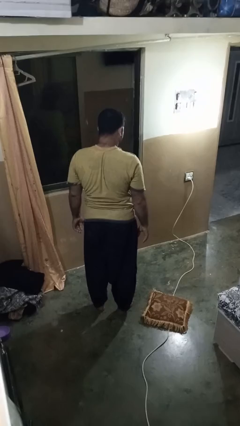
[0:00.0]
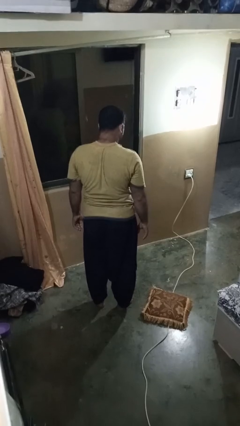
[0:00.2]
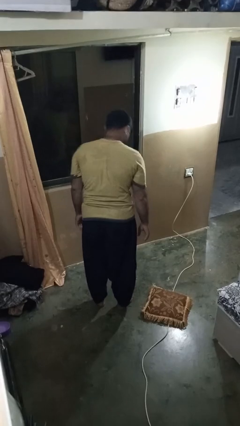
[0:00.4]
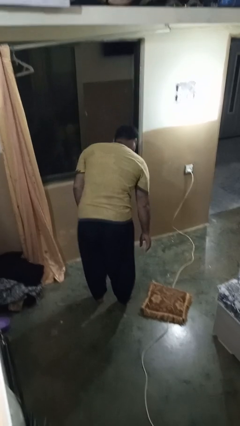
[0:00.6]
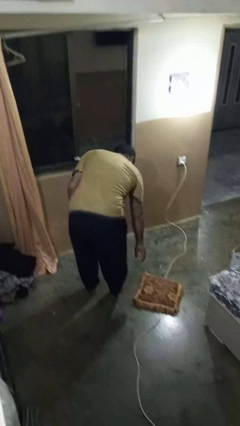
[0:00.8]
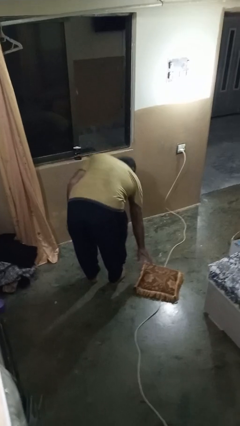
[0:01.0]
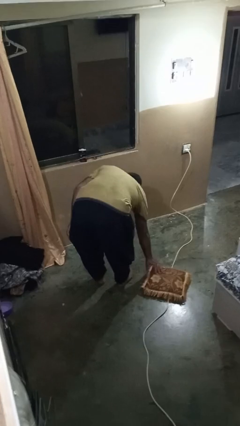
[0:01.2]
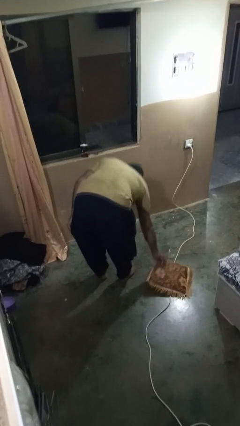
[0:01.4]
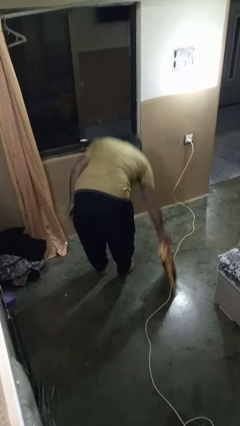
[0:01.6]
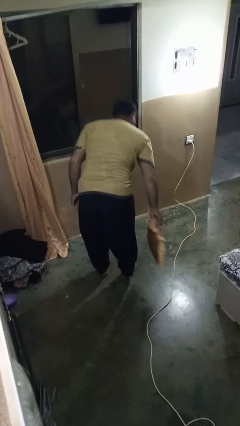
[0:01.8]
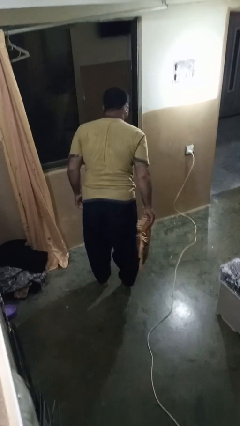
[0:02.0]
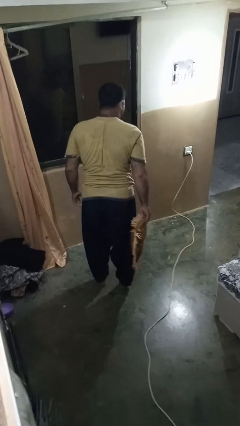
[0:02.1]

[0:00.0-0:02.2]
person picks up object from floor

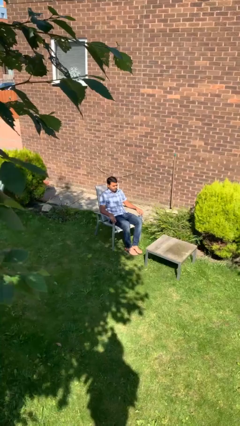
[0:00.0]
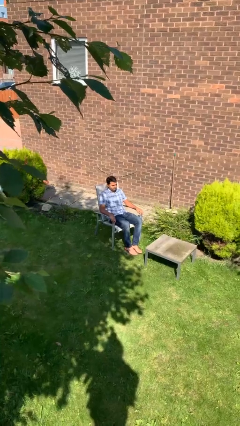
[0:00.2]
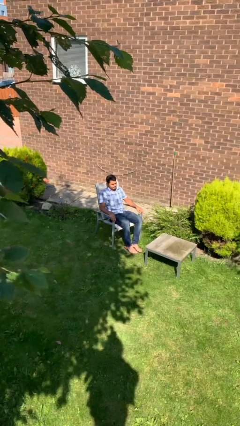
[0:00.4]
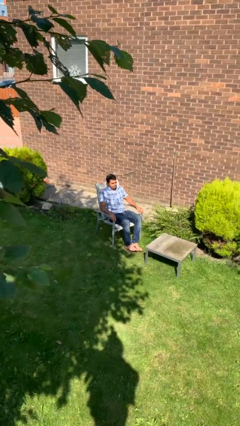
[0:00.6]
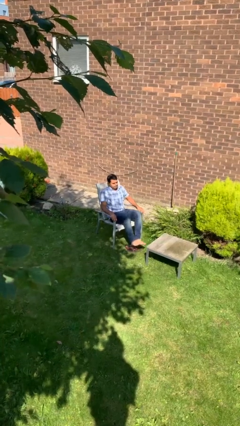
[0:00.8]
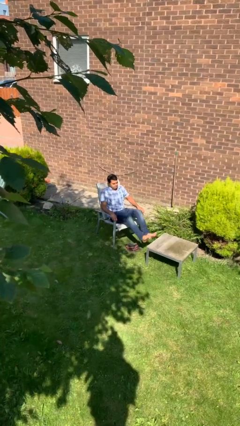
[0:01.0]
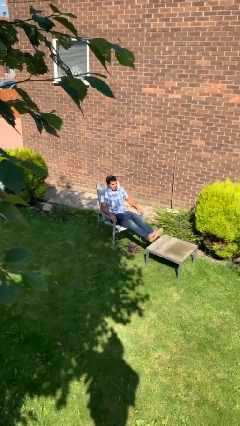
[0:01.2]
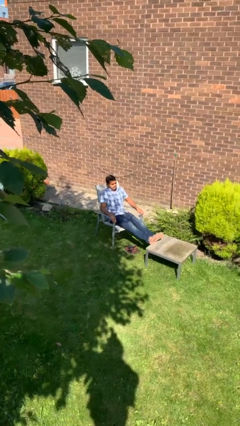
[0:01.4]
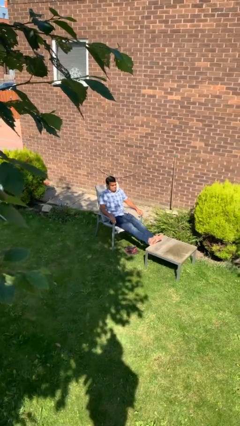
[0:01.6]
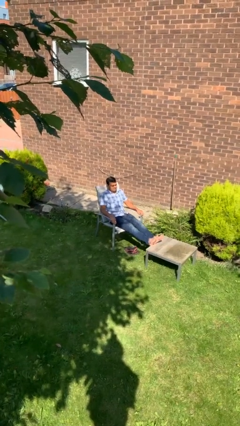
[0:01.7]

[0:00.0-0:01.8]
person puts feet up

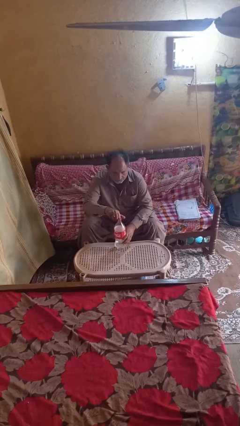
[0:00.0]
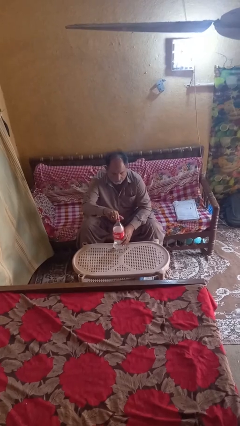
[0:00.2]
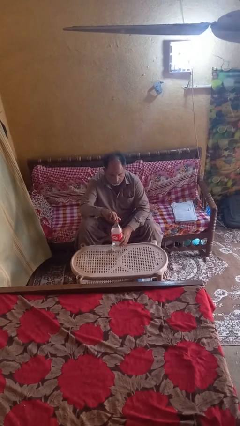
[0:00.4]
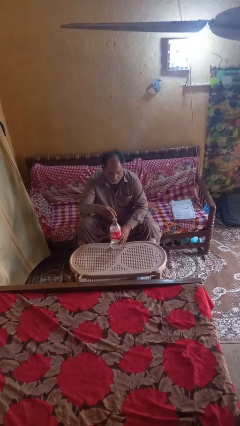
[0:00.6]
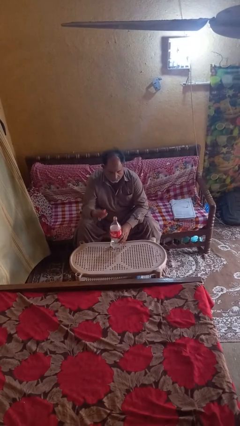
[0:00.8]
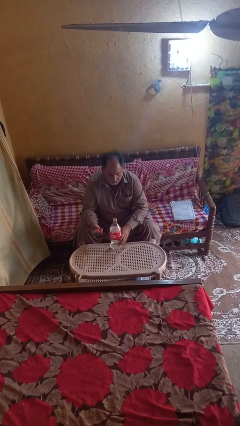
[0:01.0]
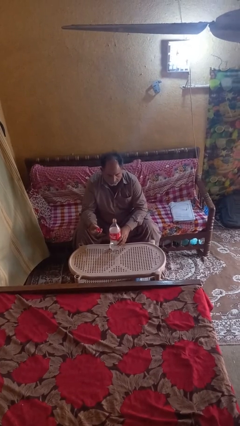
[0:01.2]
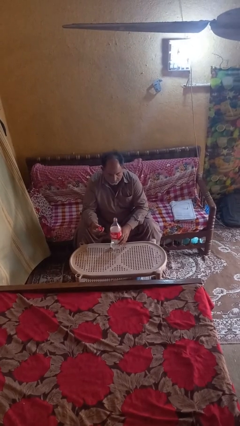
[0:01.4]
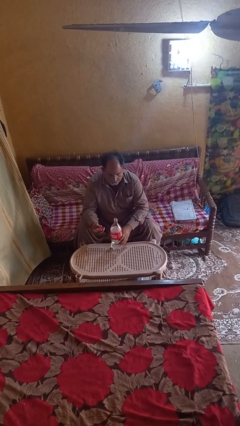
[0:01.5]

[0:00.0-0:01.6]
person unscrews lid from bottle

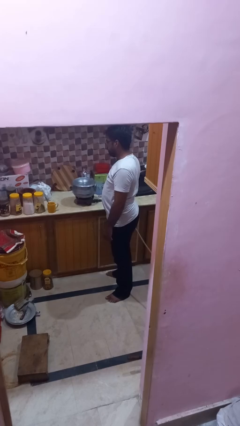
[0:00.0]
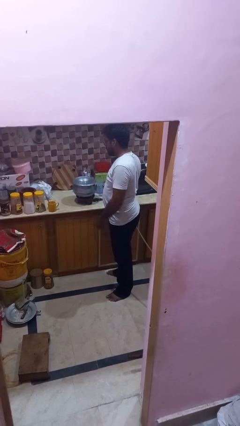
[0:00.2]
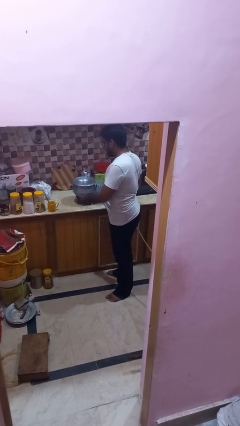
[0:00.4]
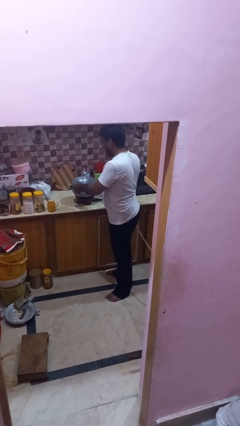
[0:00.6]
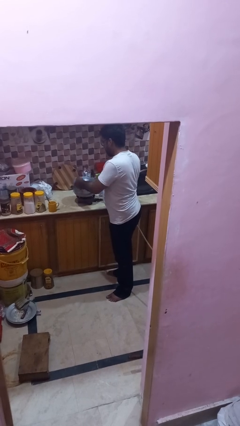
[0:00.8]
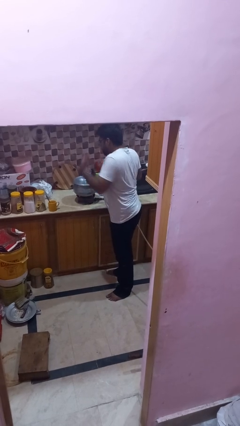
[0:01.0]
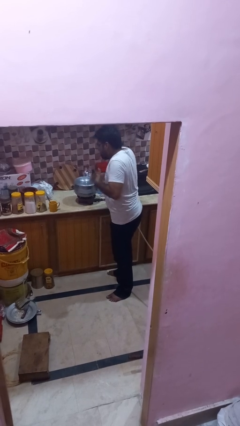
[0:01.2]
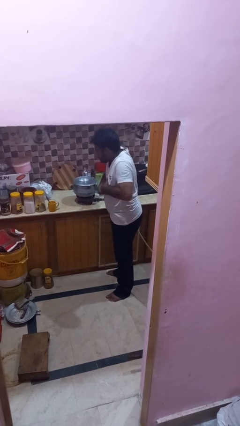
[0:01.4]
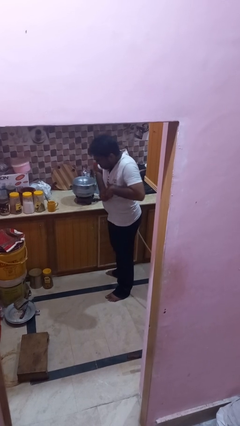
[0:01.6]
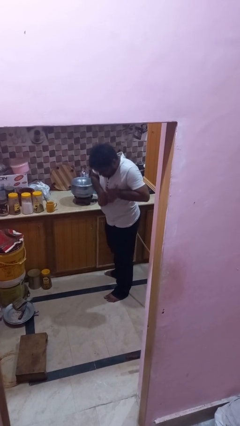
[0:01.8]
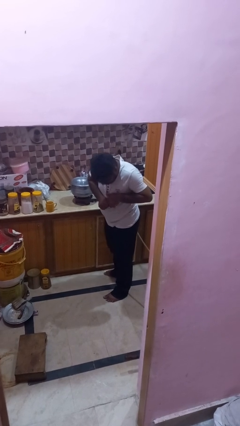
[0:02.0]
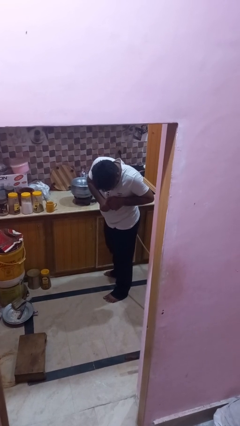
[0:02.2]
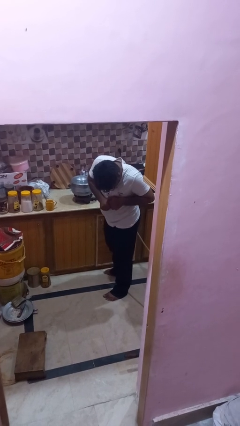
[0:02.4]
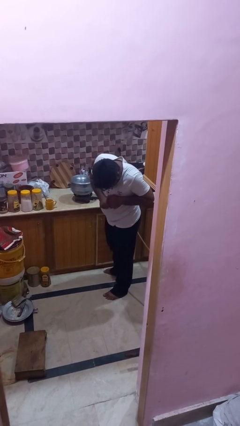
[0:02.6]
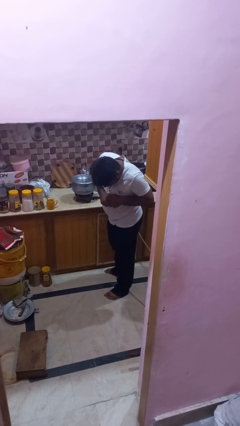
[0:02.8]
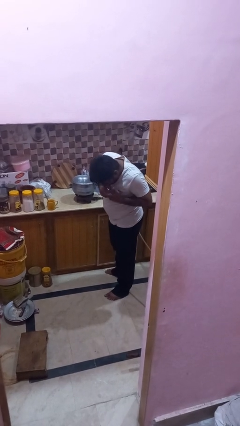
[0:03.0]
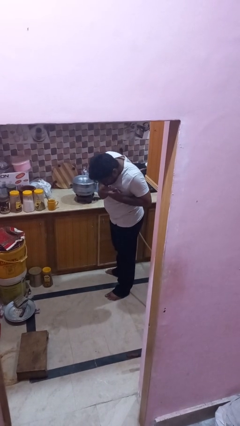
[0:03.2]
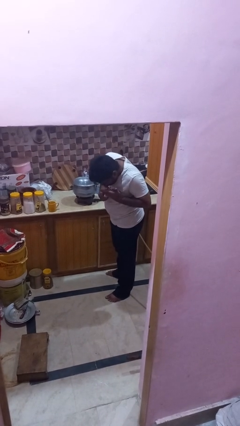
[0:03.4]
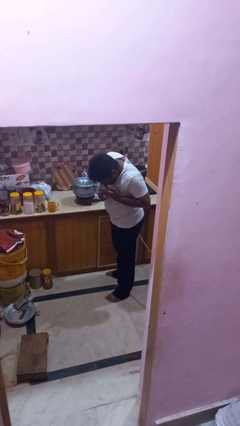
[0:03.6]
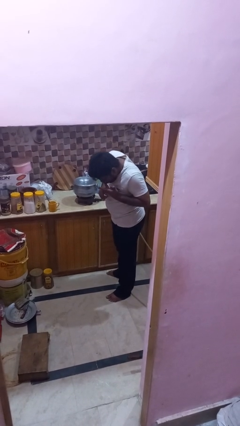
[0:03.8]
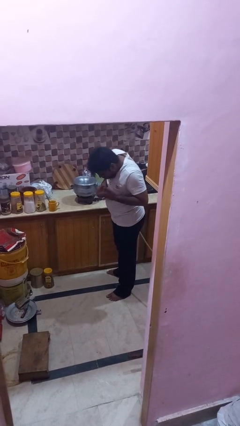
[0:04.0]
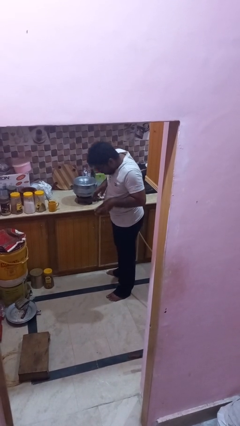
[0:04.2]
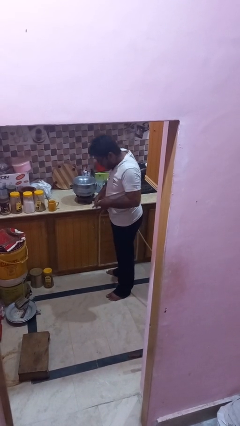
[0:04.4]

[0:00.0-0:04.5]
person burns hand

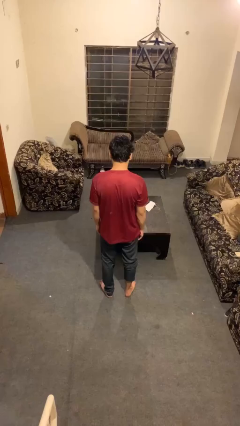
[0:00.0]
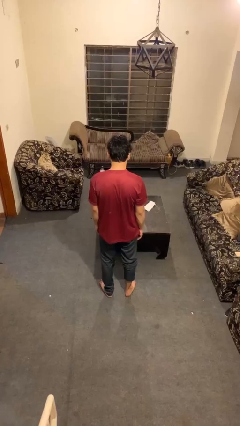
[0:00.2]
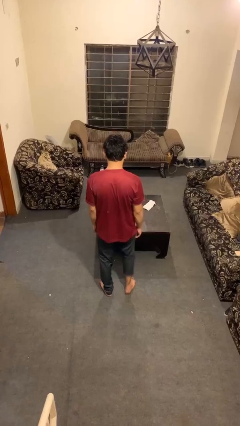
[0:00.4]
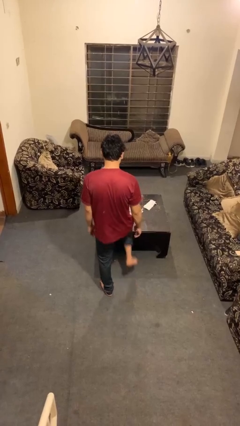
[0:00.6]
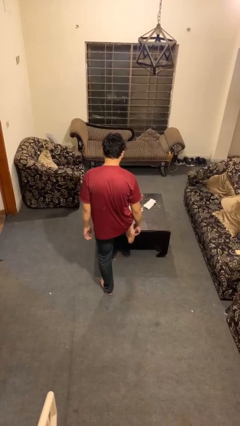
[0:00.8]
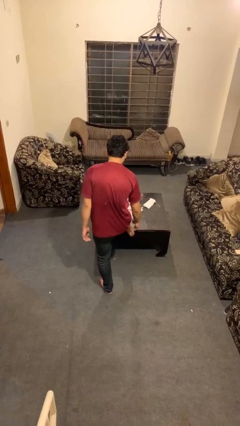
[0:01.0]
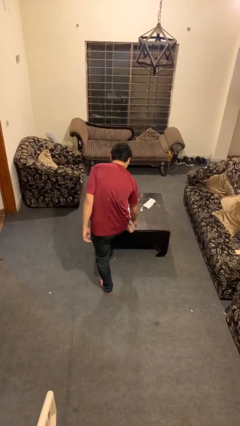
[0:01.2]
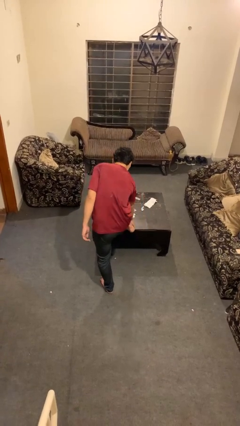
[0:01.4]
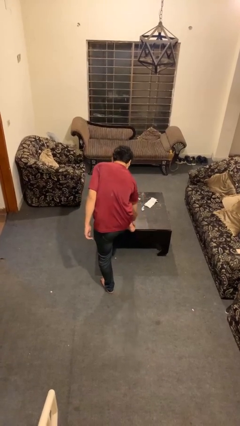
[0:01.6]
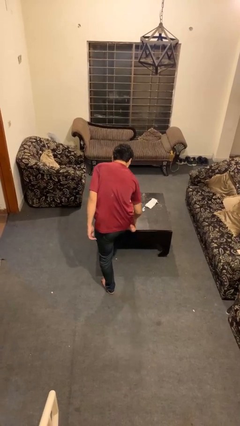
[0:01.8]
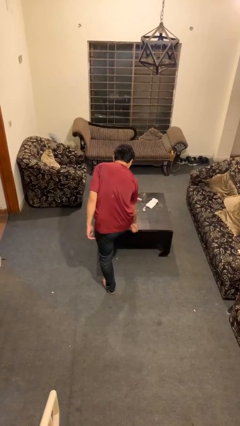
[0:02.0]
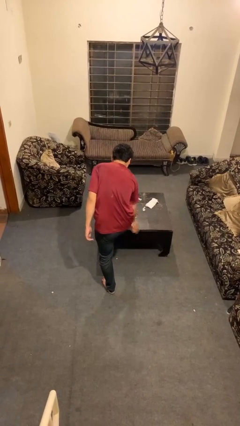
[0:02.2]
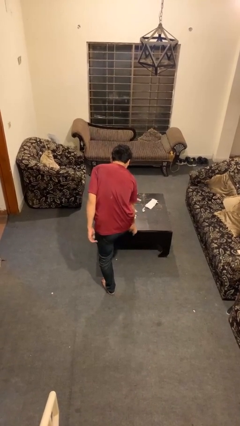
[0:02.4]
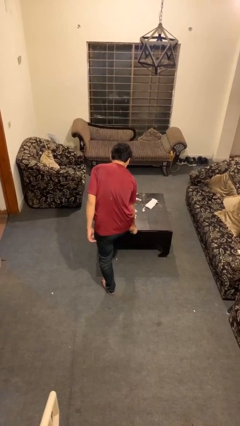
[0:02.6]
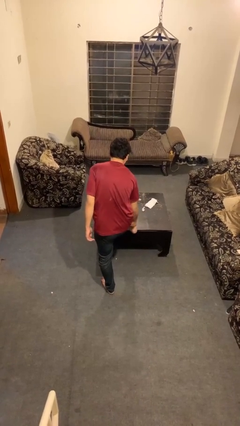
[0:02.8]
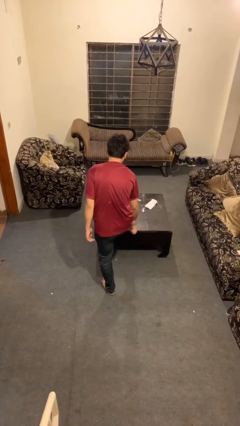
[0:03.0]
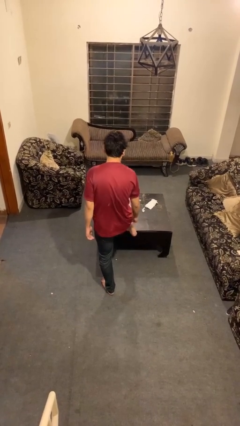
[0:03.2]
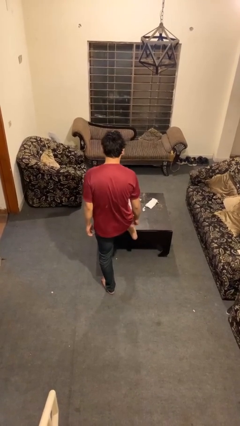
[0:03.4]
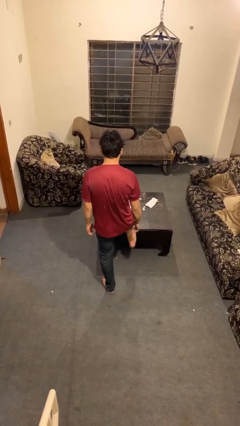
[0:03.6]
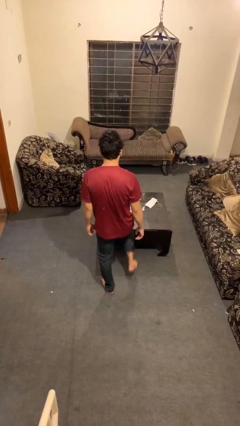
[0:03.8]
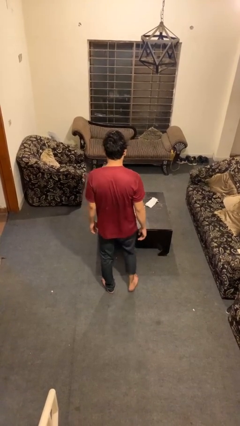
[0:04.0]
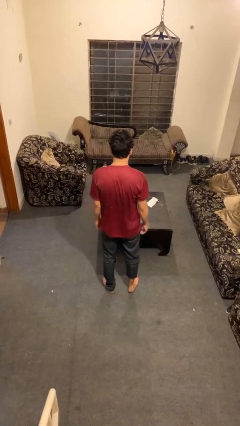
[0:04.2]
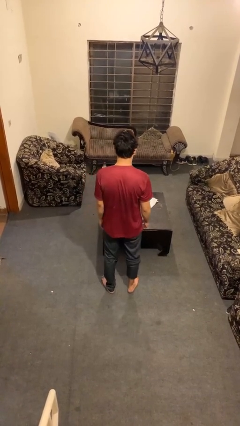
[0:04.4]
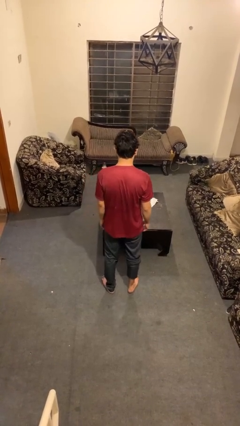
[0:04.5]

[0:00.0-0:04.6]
person rubs foot

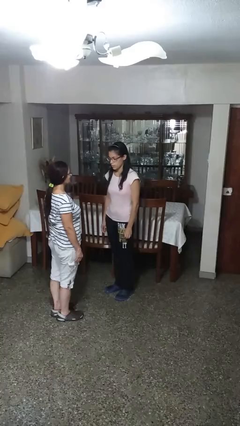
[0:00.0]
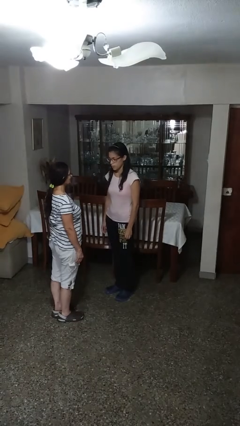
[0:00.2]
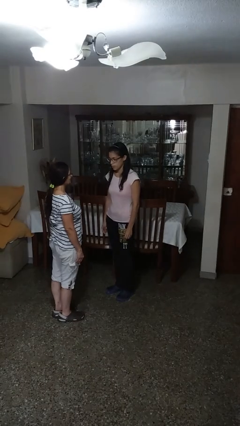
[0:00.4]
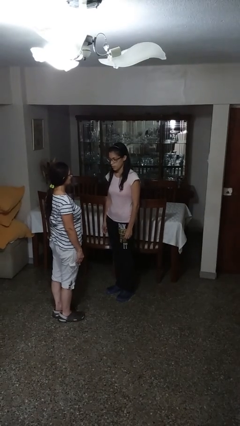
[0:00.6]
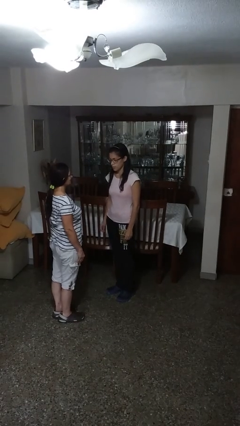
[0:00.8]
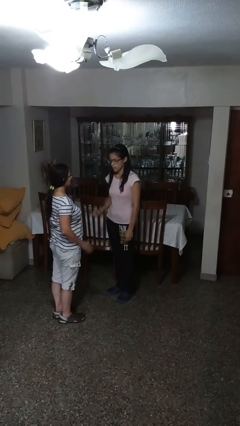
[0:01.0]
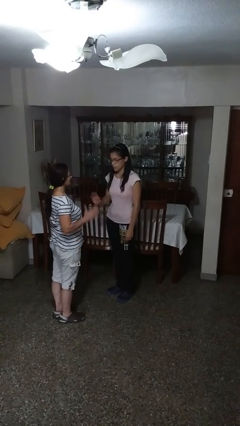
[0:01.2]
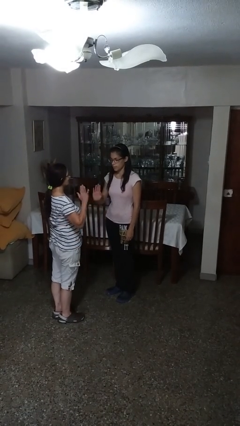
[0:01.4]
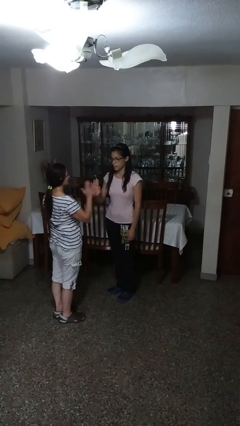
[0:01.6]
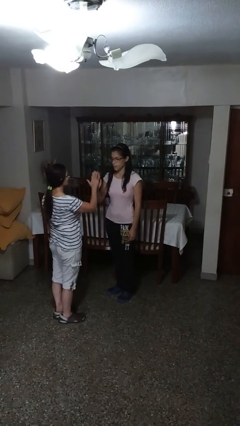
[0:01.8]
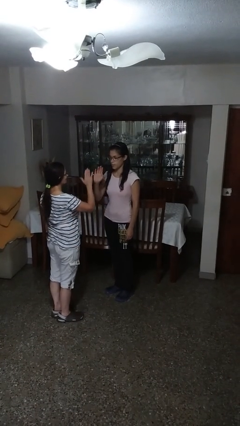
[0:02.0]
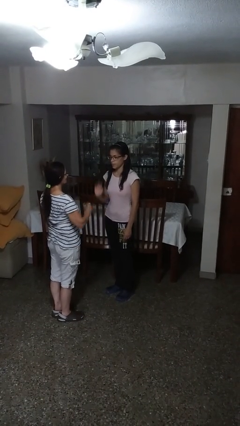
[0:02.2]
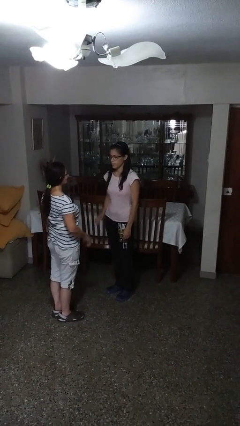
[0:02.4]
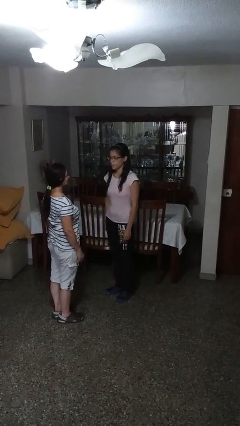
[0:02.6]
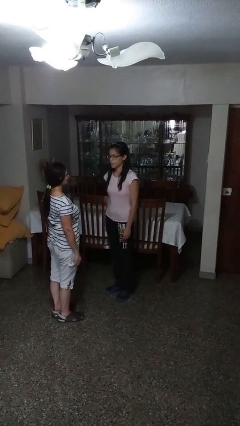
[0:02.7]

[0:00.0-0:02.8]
person highfives hand
